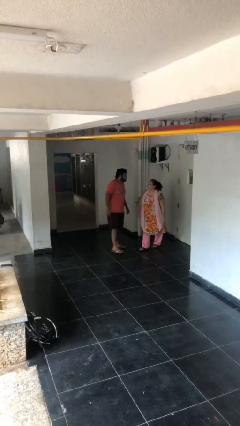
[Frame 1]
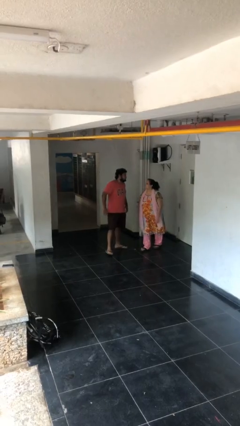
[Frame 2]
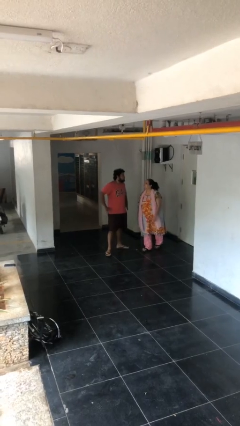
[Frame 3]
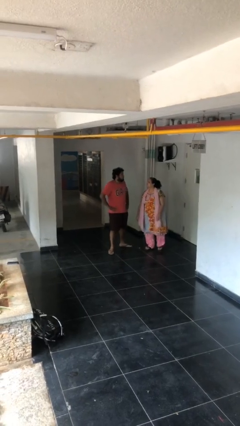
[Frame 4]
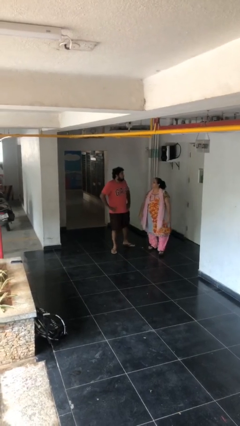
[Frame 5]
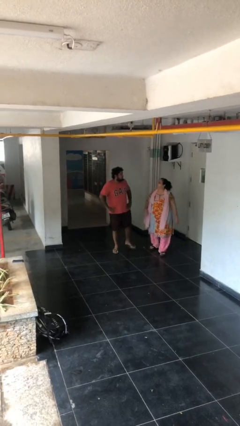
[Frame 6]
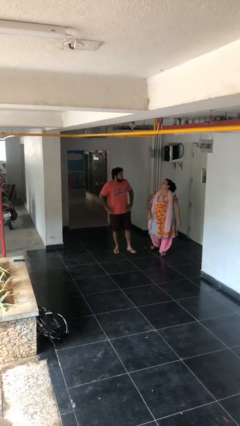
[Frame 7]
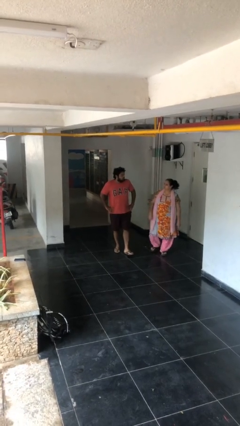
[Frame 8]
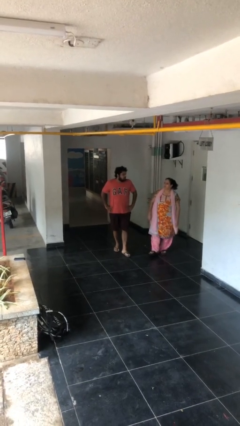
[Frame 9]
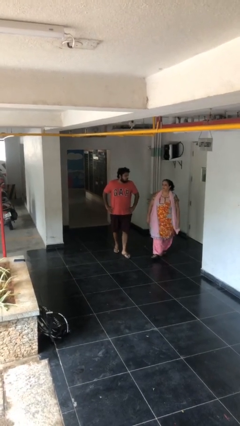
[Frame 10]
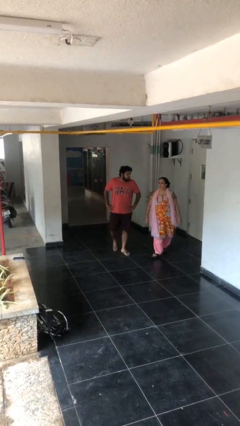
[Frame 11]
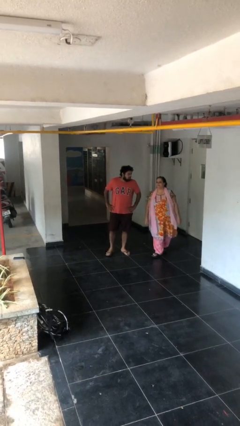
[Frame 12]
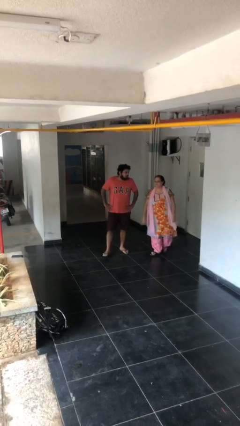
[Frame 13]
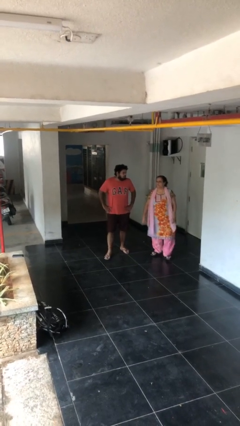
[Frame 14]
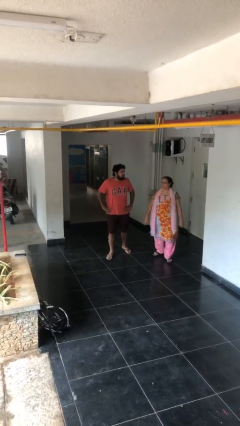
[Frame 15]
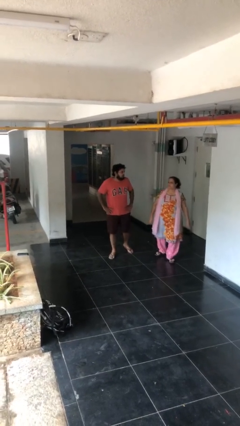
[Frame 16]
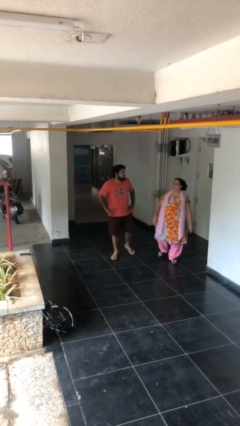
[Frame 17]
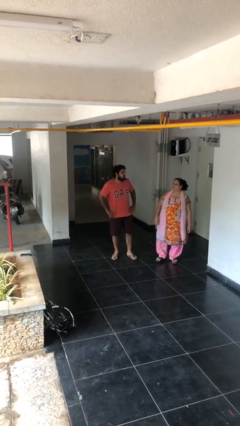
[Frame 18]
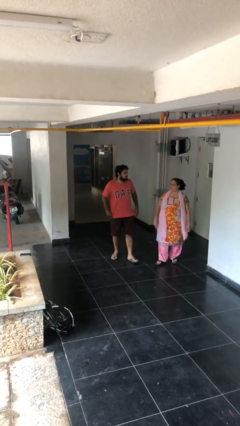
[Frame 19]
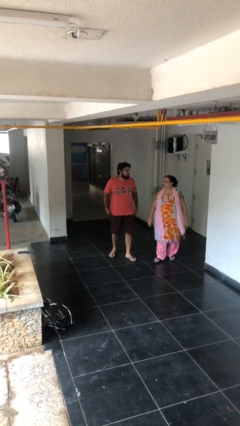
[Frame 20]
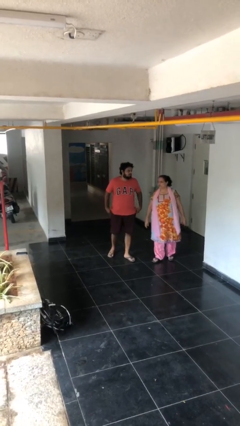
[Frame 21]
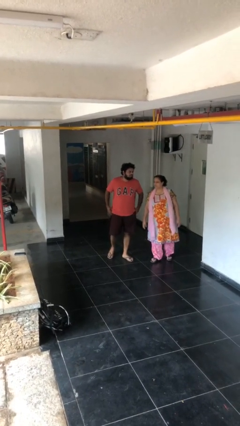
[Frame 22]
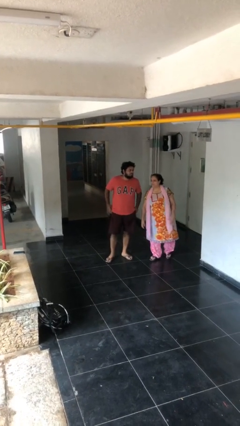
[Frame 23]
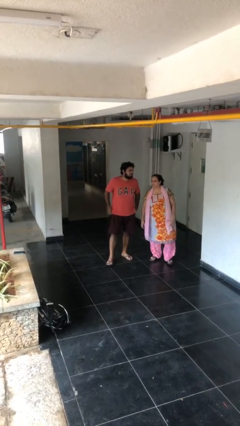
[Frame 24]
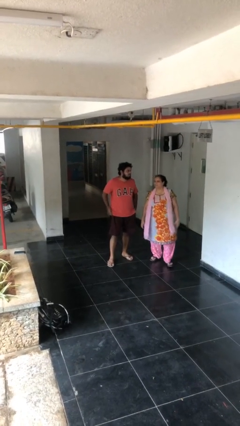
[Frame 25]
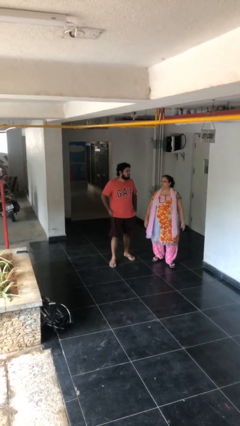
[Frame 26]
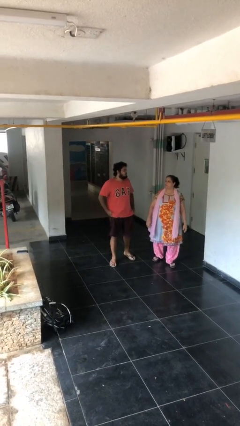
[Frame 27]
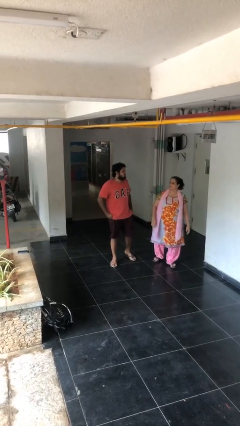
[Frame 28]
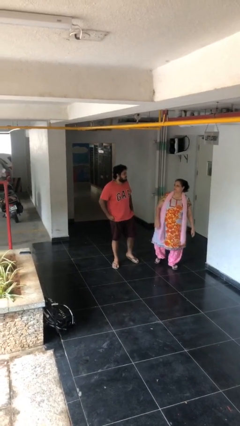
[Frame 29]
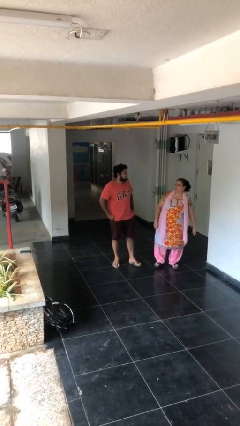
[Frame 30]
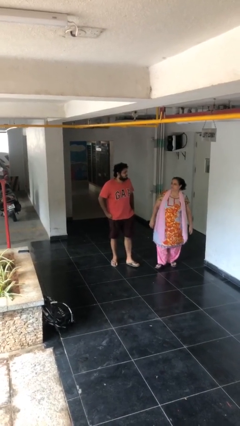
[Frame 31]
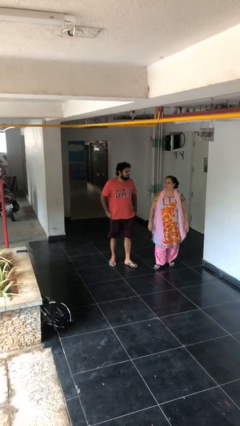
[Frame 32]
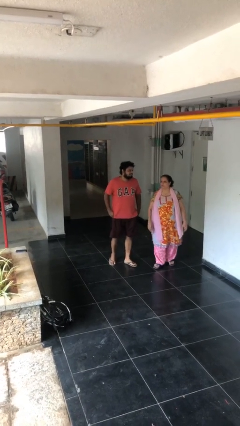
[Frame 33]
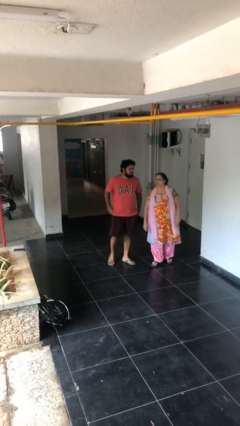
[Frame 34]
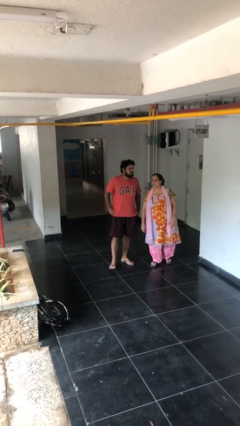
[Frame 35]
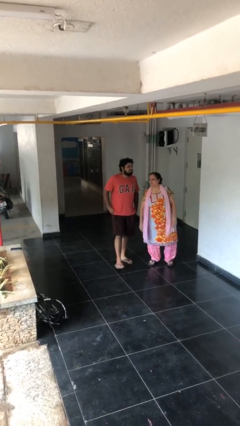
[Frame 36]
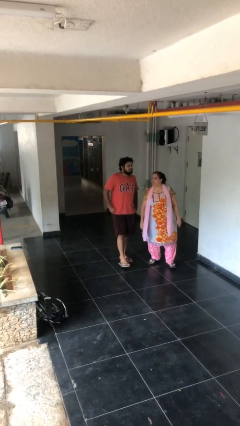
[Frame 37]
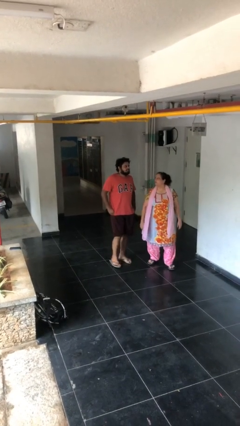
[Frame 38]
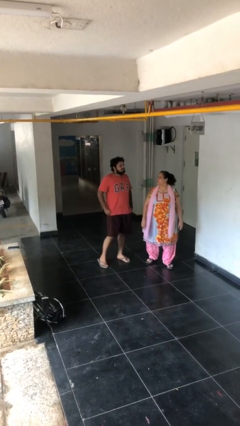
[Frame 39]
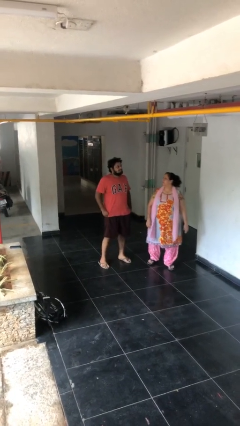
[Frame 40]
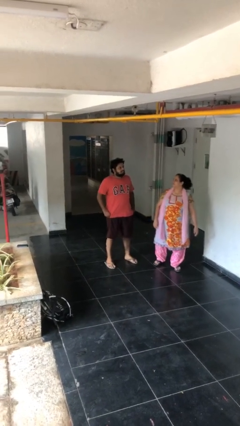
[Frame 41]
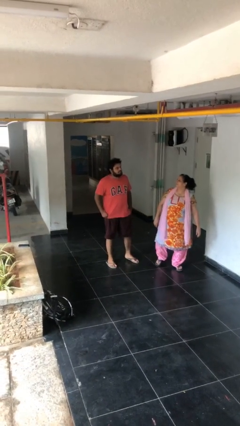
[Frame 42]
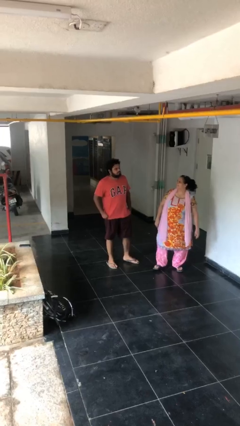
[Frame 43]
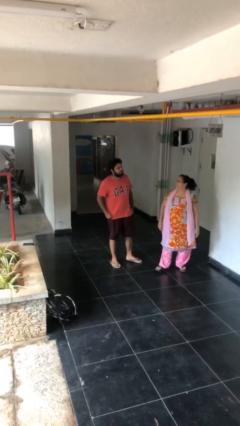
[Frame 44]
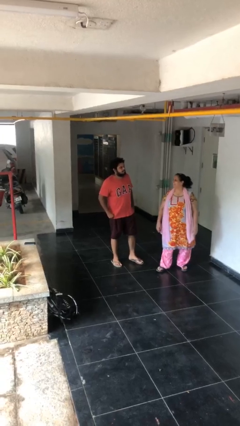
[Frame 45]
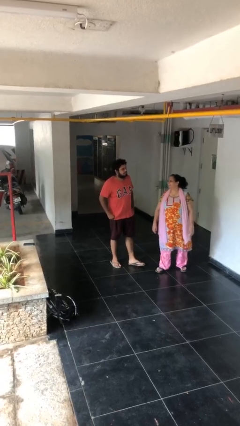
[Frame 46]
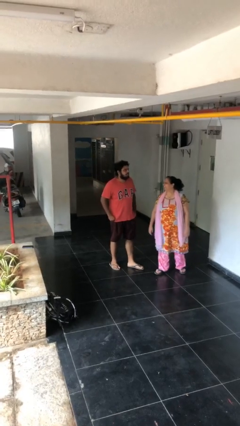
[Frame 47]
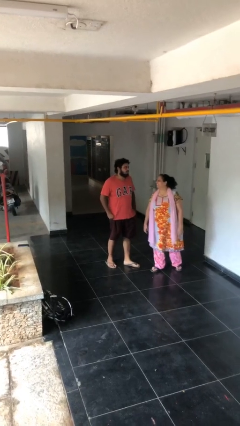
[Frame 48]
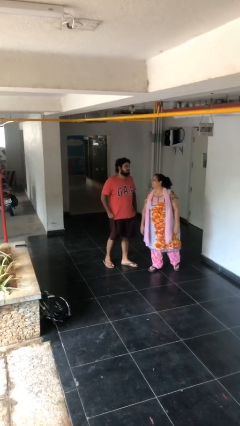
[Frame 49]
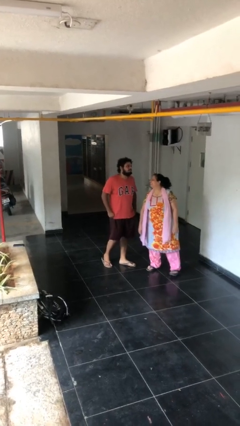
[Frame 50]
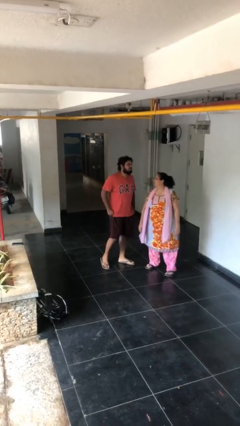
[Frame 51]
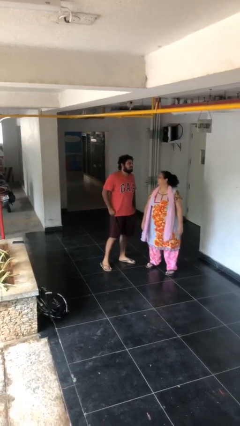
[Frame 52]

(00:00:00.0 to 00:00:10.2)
person talks to person

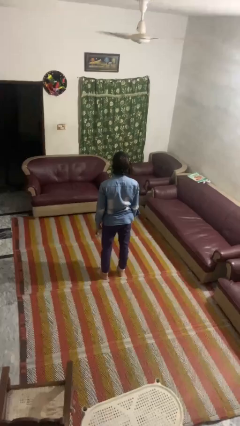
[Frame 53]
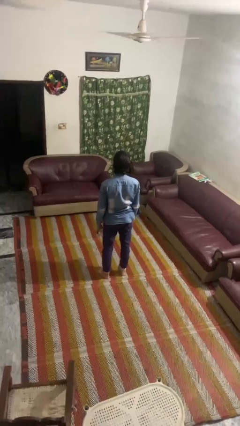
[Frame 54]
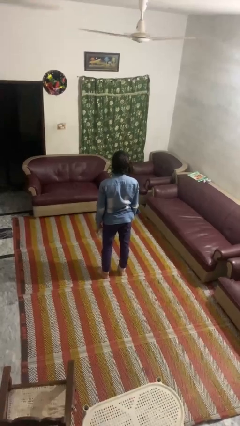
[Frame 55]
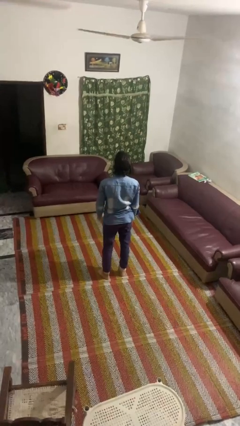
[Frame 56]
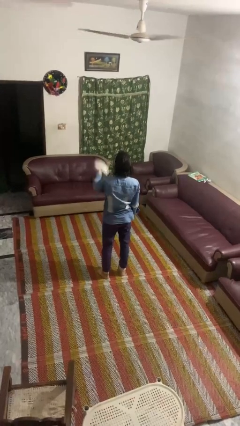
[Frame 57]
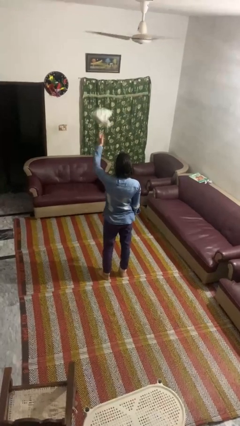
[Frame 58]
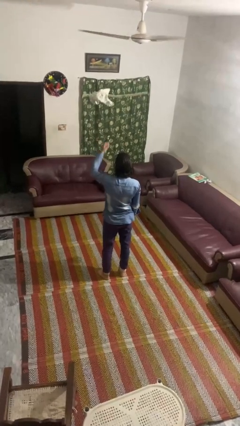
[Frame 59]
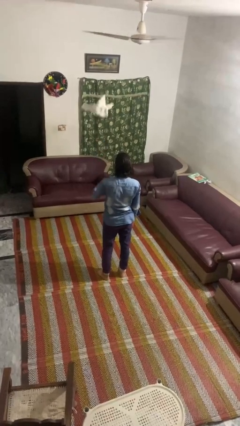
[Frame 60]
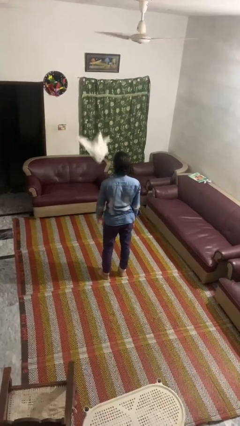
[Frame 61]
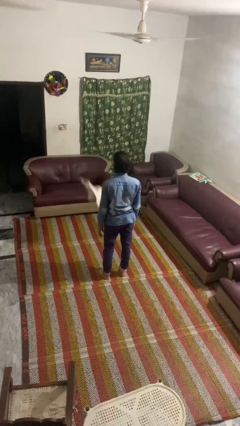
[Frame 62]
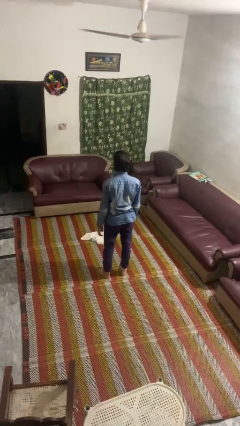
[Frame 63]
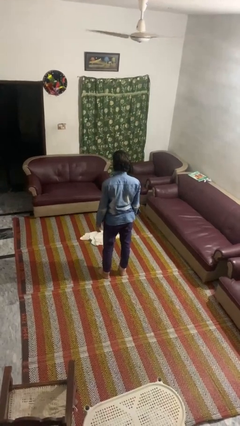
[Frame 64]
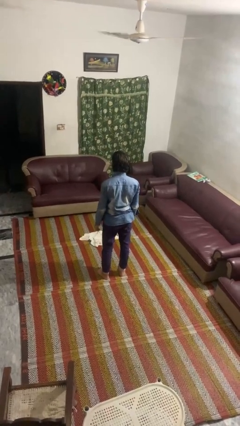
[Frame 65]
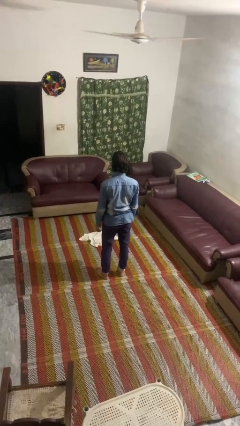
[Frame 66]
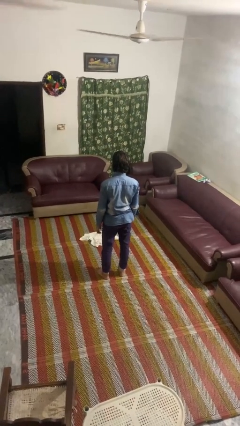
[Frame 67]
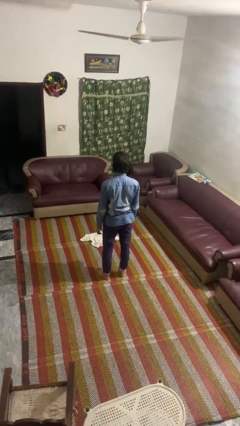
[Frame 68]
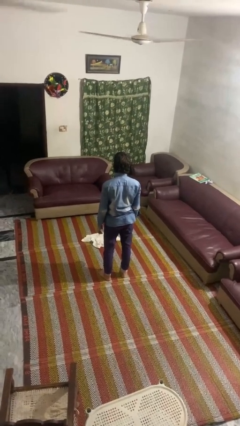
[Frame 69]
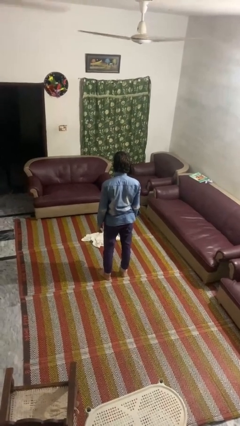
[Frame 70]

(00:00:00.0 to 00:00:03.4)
person throws object into air

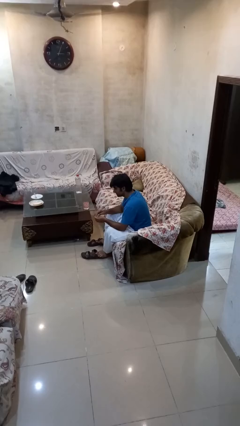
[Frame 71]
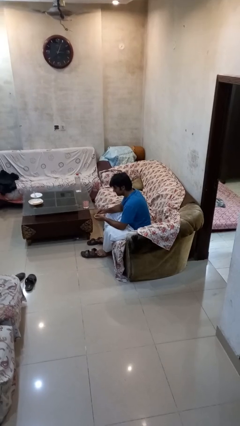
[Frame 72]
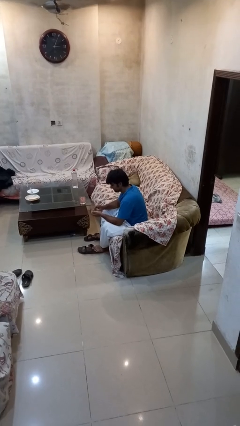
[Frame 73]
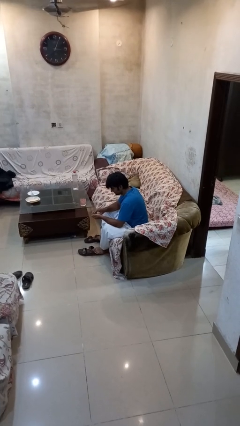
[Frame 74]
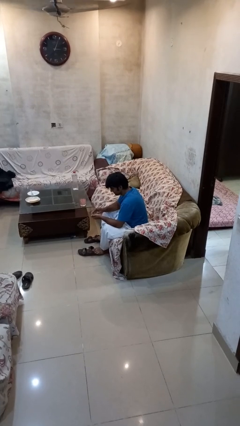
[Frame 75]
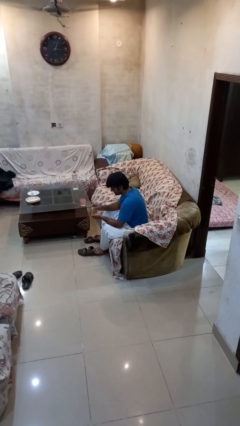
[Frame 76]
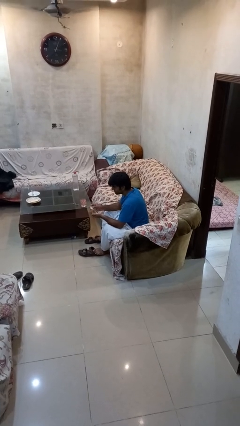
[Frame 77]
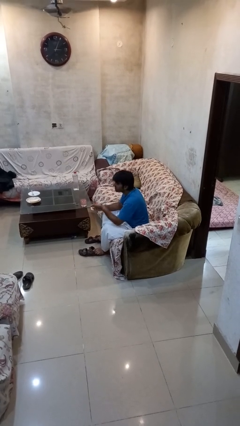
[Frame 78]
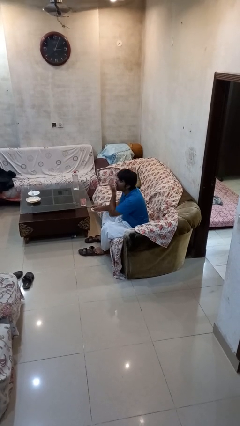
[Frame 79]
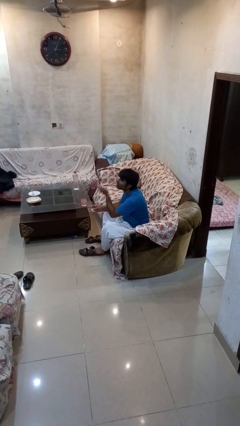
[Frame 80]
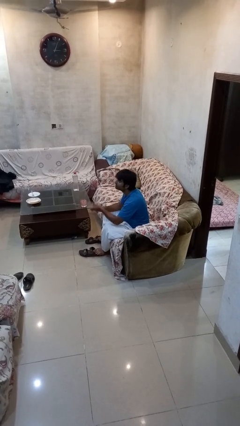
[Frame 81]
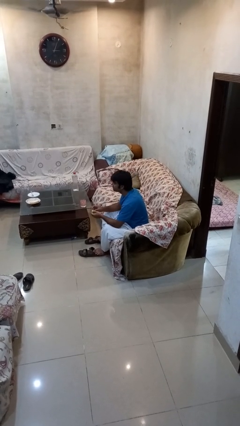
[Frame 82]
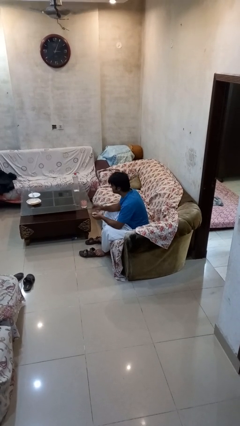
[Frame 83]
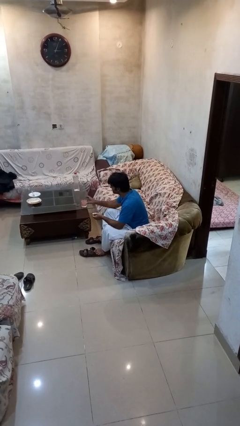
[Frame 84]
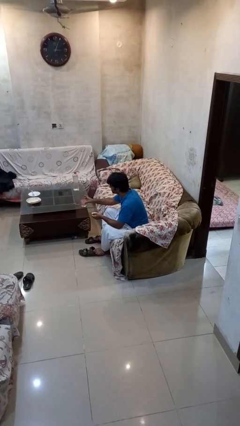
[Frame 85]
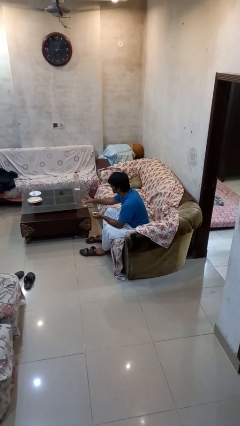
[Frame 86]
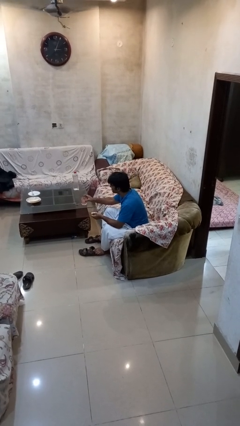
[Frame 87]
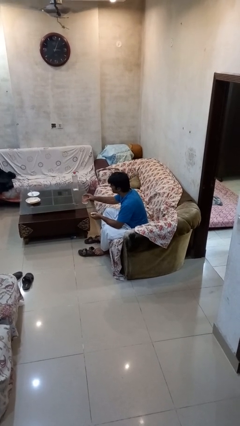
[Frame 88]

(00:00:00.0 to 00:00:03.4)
person takes medicine pills

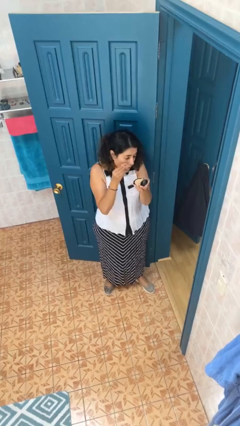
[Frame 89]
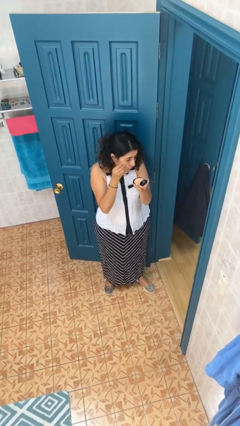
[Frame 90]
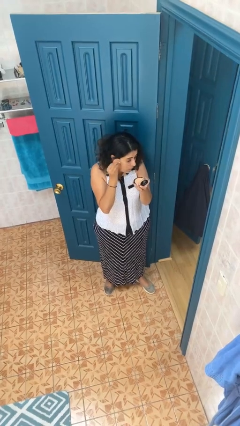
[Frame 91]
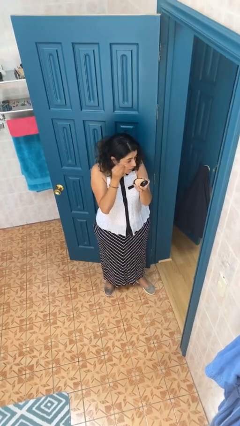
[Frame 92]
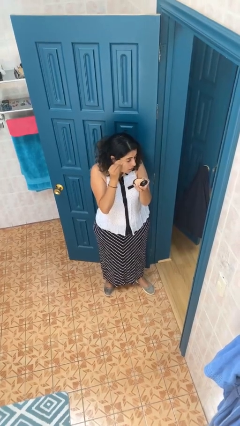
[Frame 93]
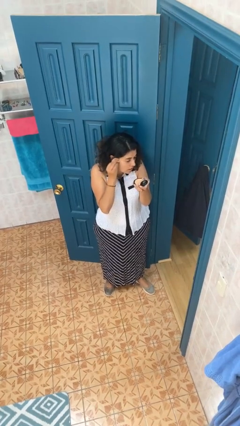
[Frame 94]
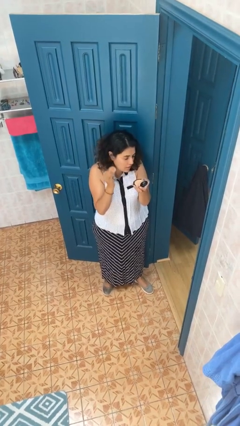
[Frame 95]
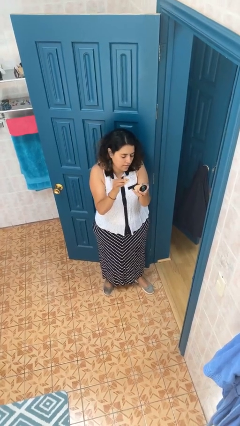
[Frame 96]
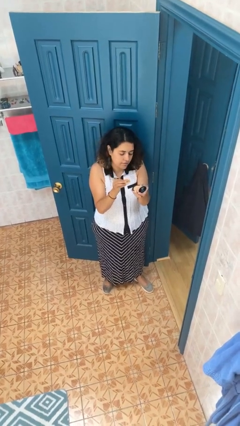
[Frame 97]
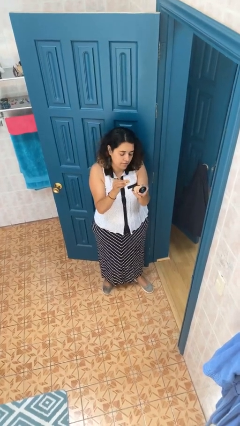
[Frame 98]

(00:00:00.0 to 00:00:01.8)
person applies foundation makeup
